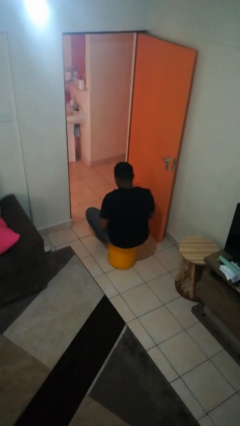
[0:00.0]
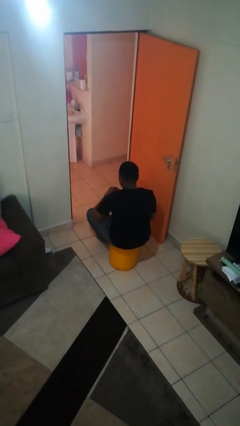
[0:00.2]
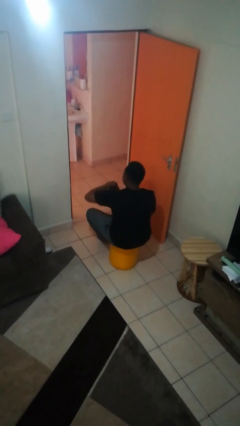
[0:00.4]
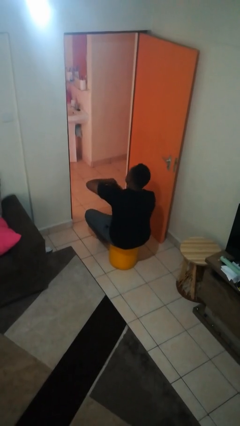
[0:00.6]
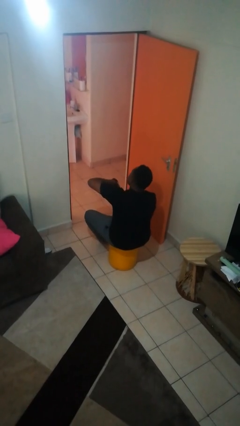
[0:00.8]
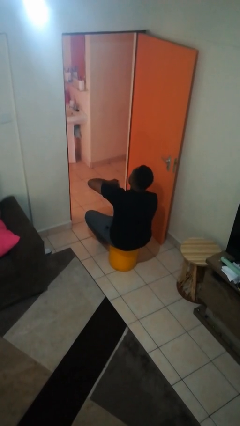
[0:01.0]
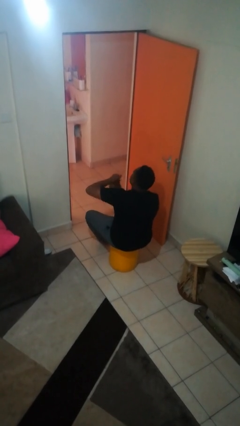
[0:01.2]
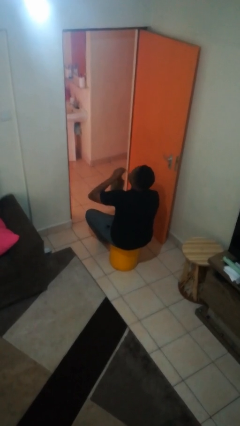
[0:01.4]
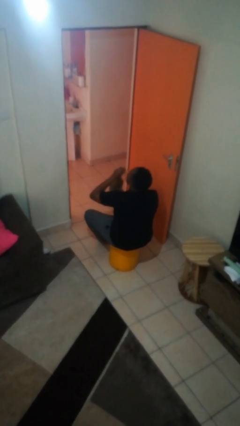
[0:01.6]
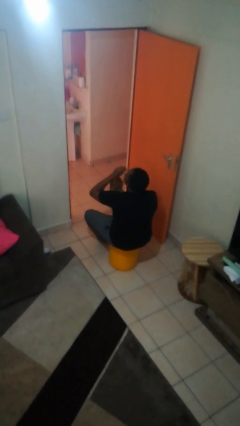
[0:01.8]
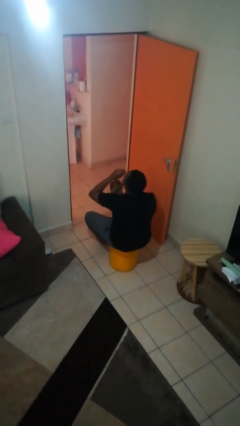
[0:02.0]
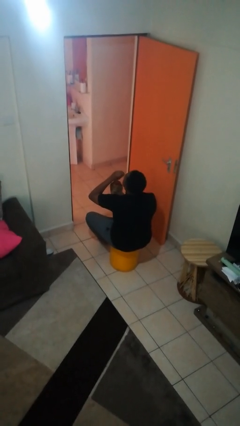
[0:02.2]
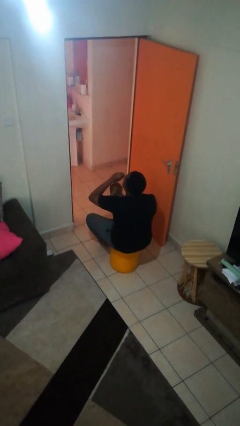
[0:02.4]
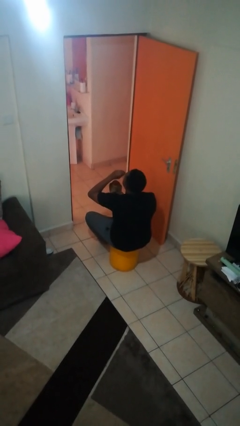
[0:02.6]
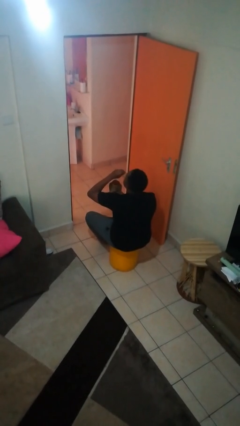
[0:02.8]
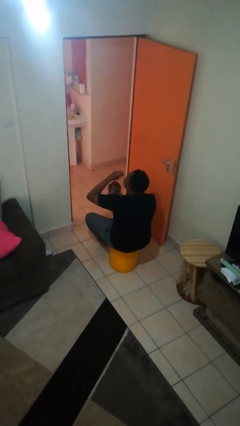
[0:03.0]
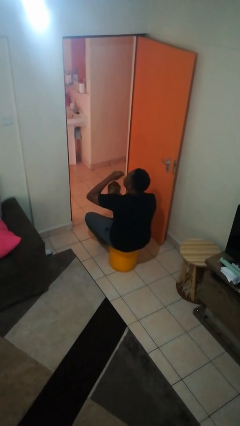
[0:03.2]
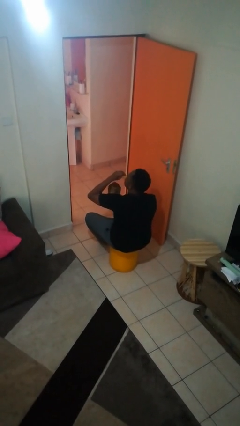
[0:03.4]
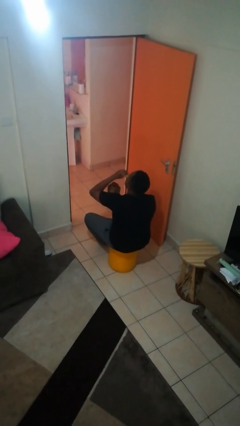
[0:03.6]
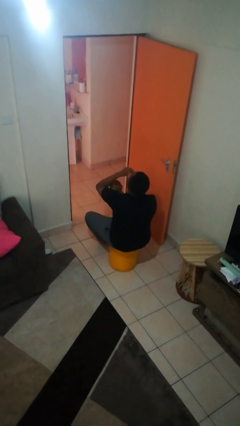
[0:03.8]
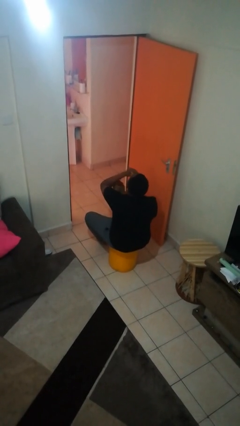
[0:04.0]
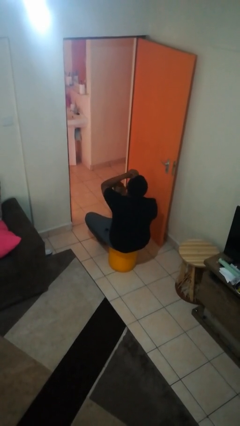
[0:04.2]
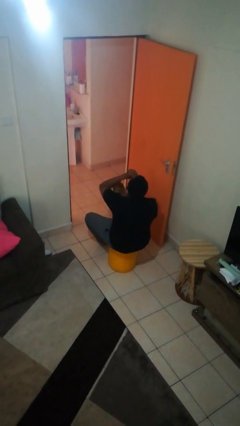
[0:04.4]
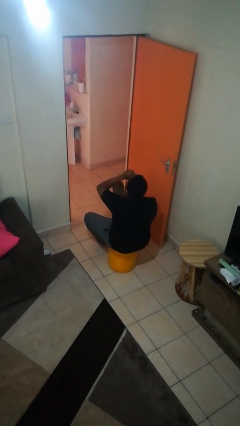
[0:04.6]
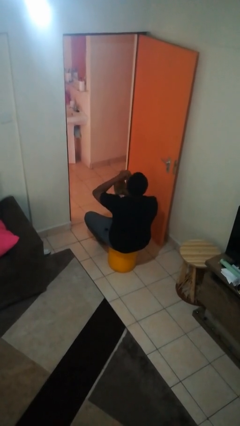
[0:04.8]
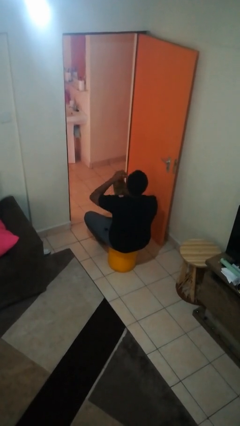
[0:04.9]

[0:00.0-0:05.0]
person eats snack from bag

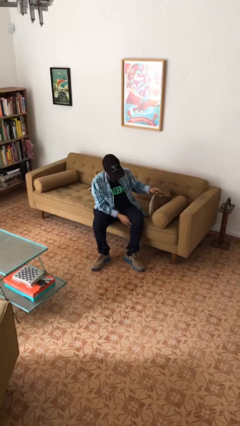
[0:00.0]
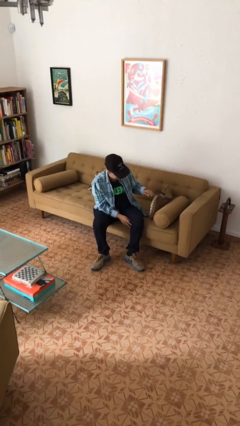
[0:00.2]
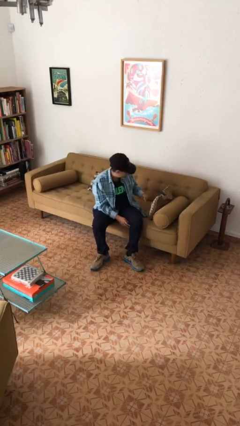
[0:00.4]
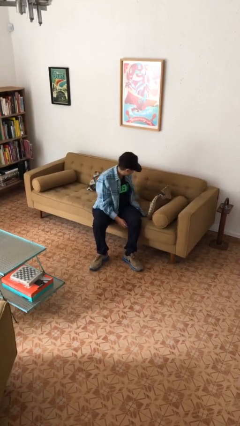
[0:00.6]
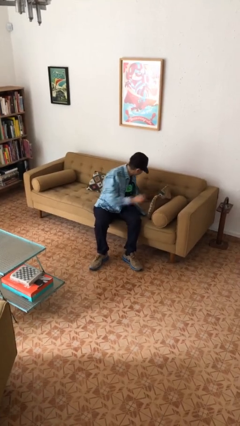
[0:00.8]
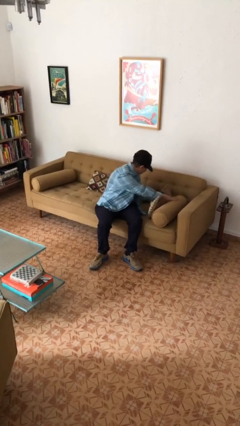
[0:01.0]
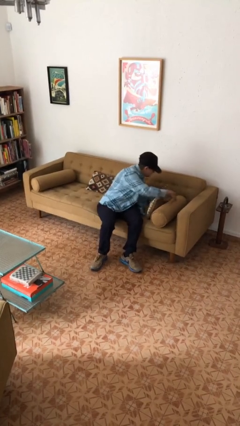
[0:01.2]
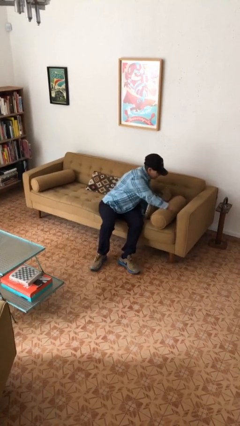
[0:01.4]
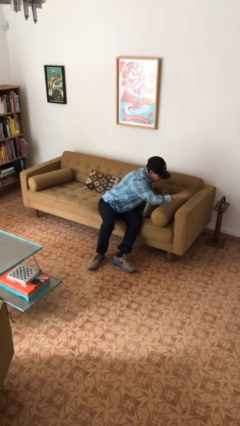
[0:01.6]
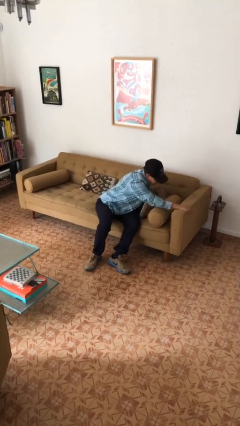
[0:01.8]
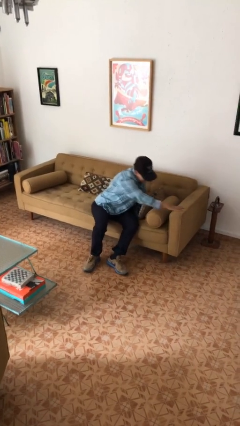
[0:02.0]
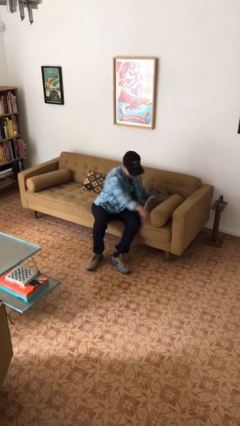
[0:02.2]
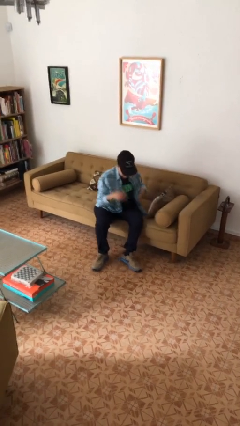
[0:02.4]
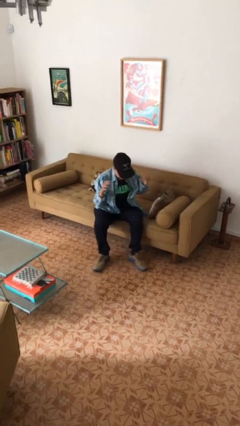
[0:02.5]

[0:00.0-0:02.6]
person searches in couch

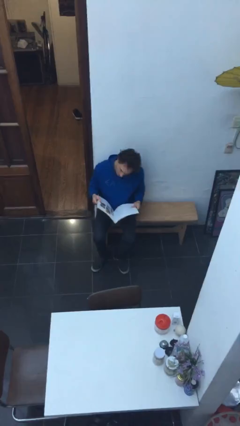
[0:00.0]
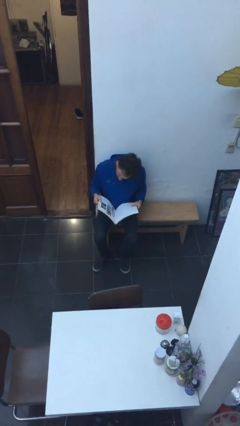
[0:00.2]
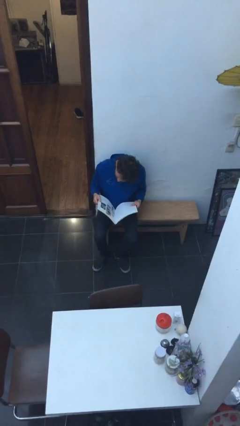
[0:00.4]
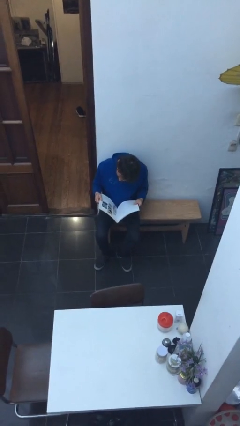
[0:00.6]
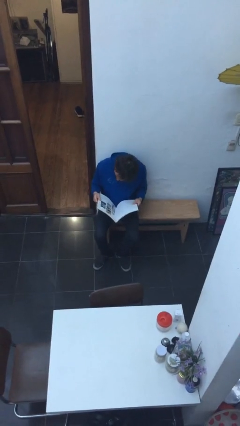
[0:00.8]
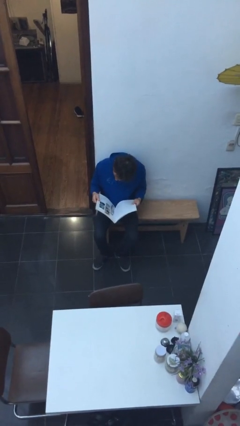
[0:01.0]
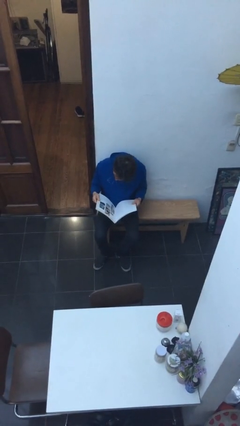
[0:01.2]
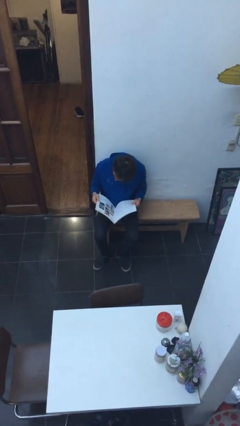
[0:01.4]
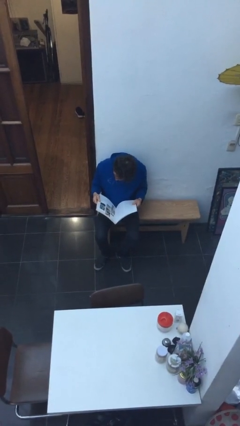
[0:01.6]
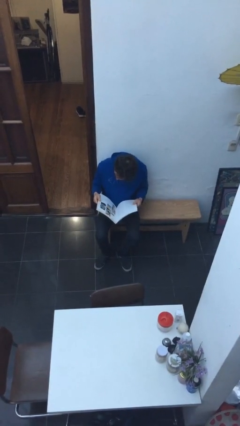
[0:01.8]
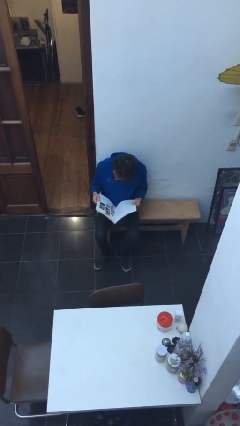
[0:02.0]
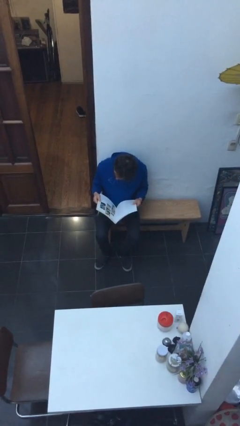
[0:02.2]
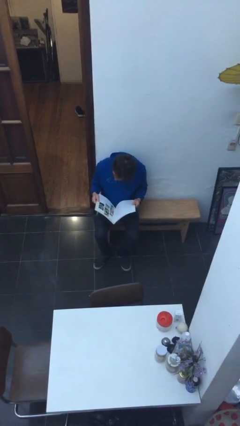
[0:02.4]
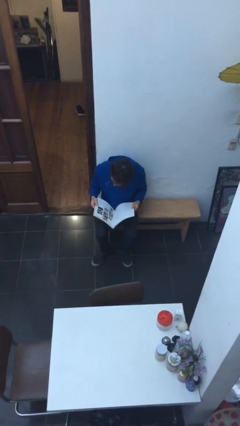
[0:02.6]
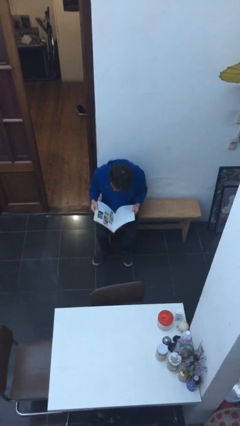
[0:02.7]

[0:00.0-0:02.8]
person reads document

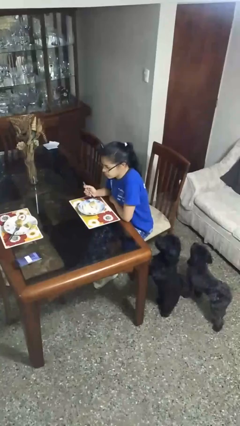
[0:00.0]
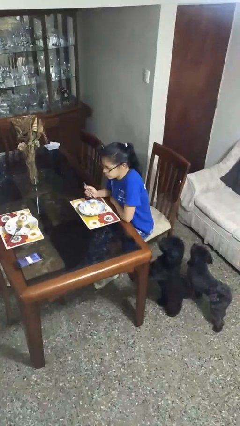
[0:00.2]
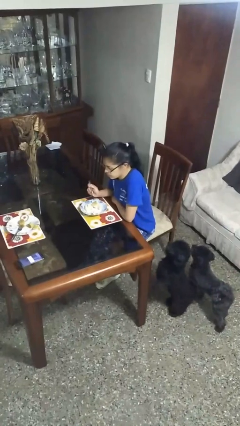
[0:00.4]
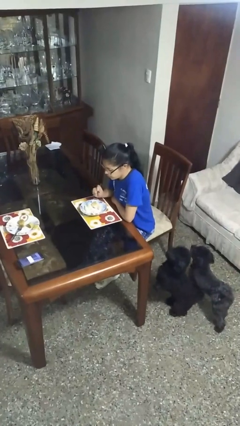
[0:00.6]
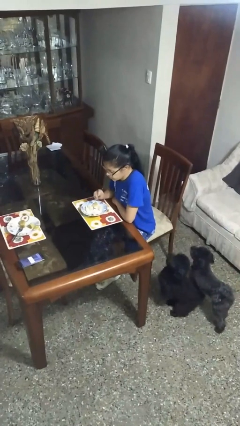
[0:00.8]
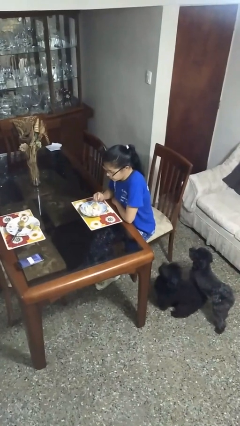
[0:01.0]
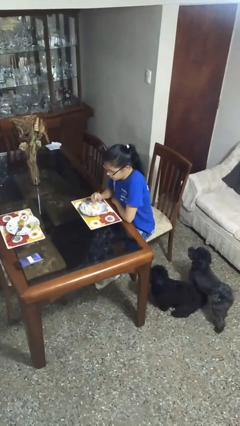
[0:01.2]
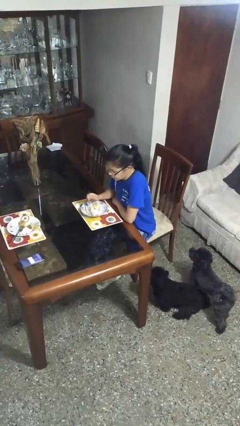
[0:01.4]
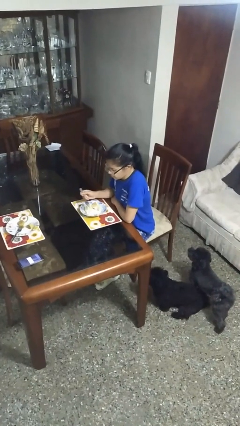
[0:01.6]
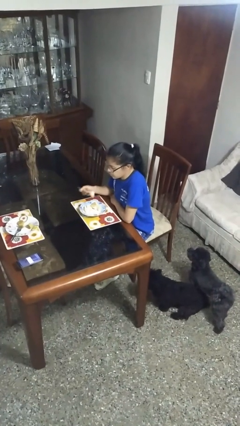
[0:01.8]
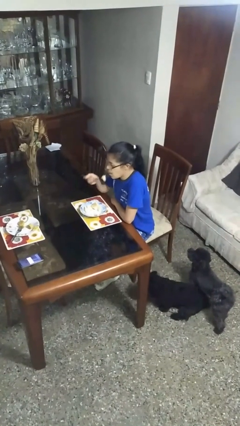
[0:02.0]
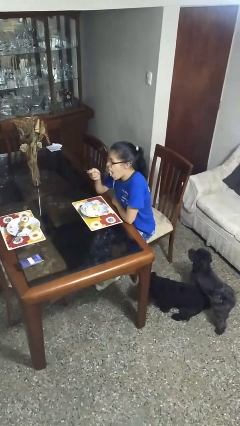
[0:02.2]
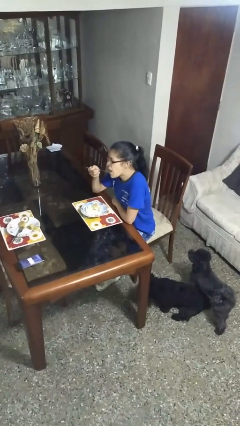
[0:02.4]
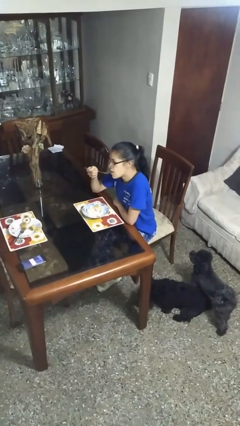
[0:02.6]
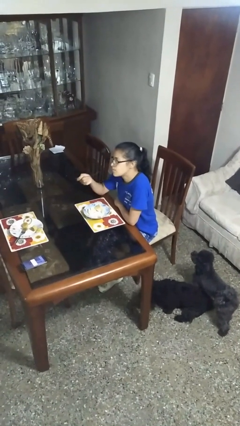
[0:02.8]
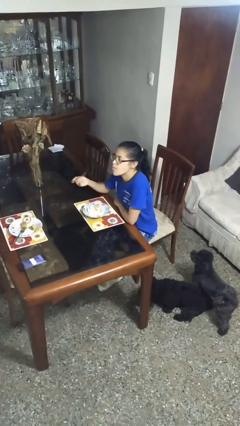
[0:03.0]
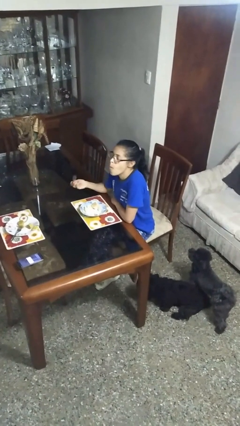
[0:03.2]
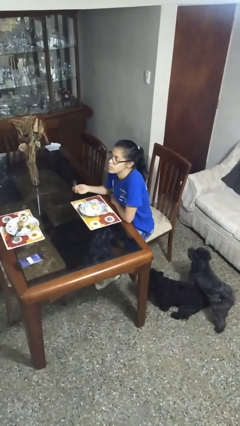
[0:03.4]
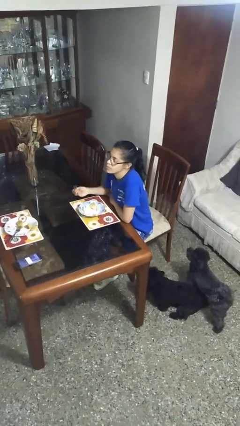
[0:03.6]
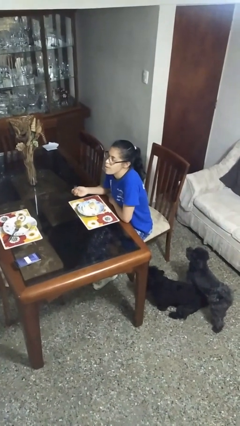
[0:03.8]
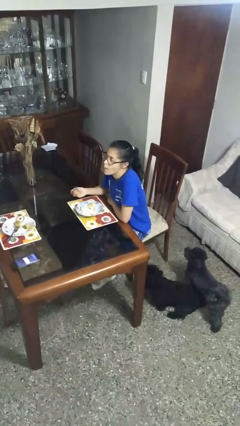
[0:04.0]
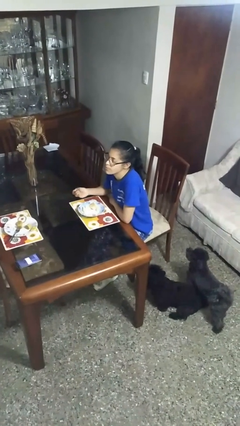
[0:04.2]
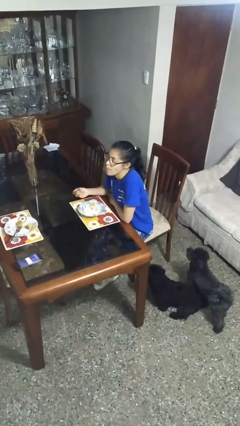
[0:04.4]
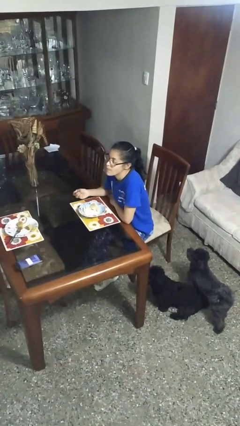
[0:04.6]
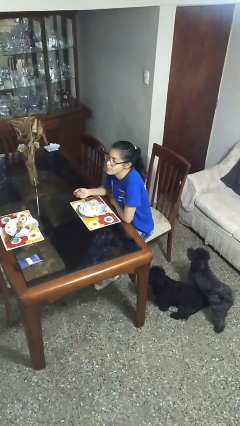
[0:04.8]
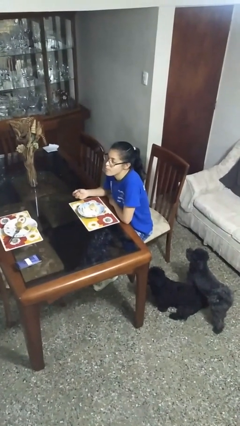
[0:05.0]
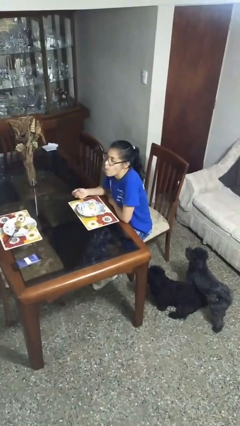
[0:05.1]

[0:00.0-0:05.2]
person eats with utensil

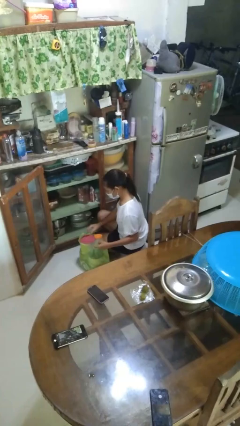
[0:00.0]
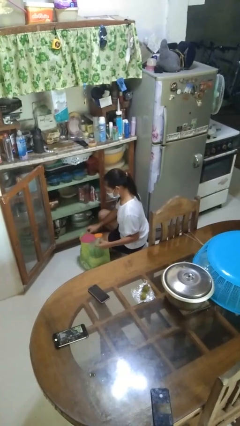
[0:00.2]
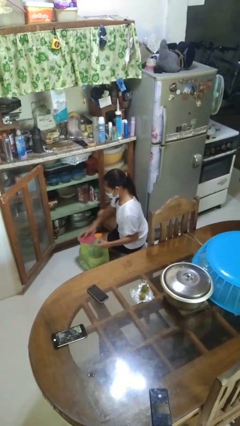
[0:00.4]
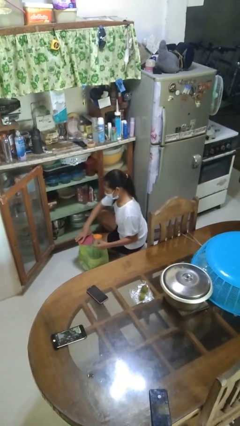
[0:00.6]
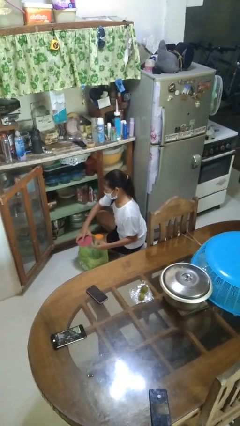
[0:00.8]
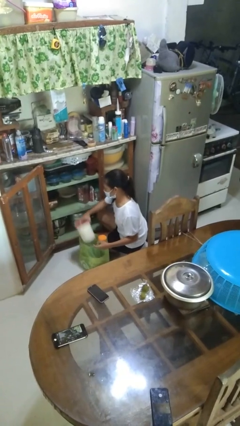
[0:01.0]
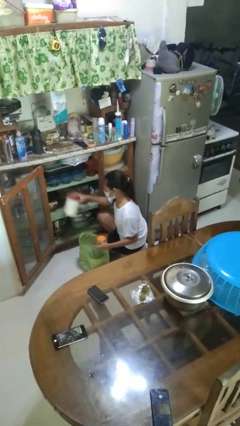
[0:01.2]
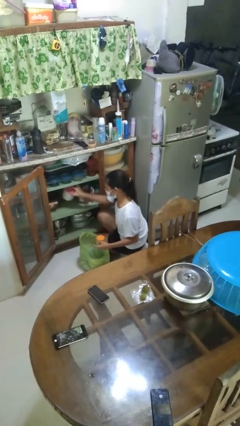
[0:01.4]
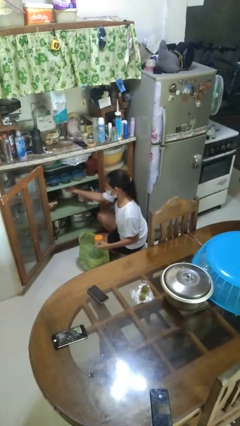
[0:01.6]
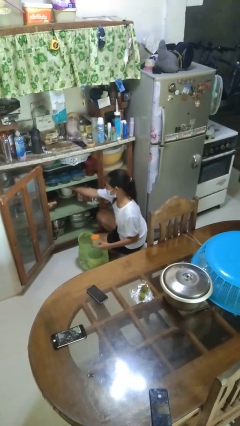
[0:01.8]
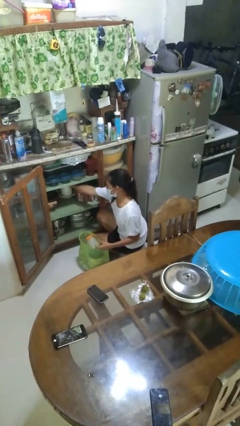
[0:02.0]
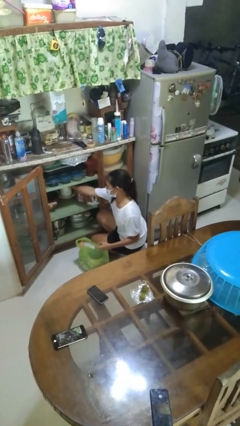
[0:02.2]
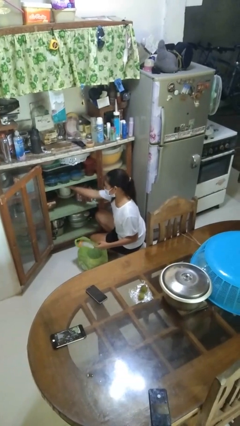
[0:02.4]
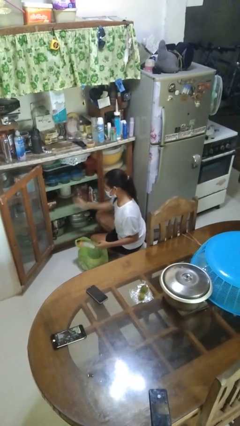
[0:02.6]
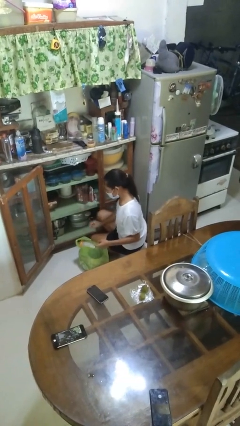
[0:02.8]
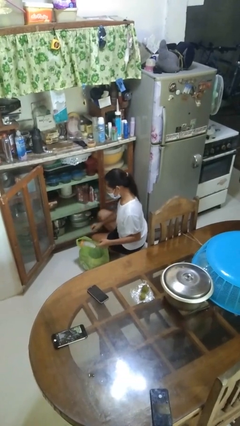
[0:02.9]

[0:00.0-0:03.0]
person loads groceries into cabinet
